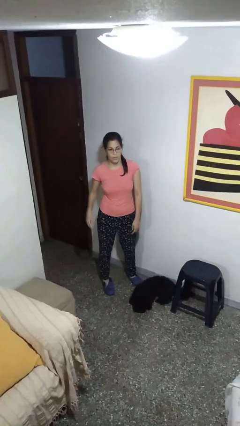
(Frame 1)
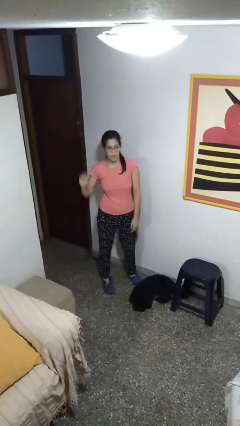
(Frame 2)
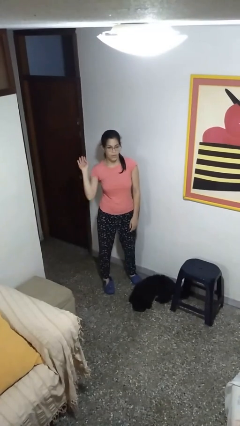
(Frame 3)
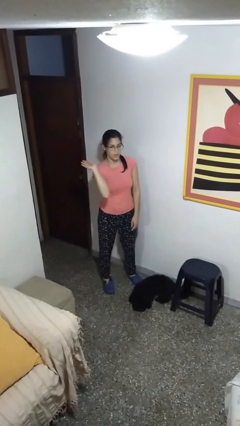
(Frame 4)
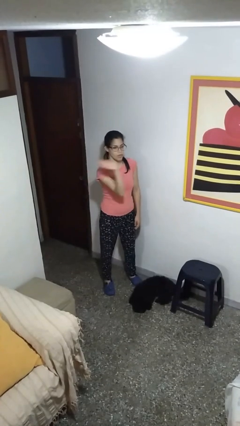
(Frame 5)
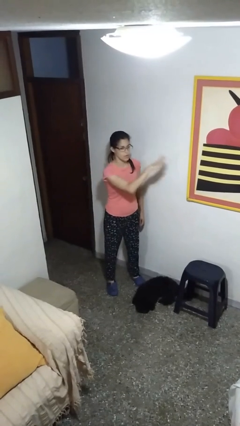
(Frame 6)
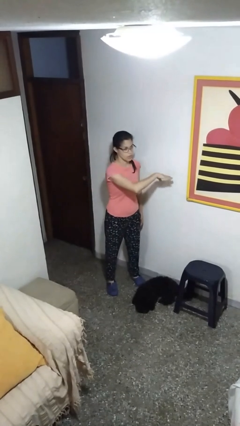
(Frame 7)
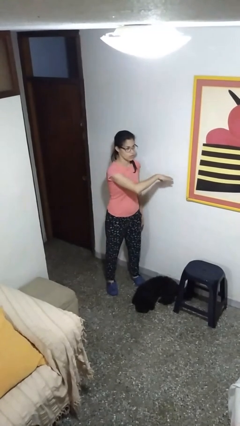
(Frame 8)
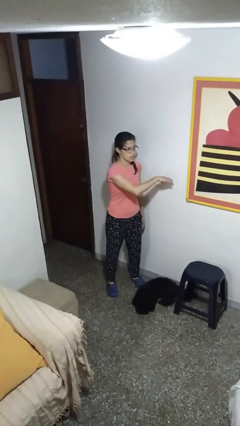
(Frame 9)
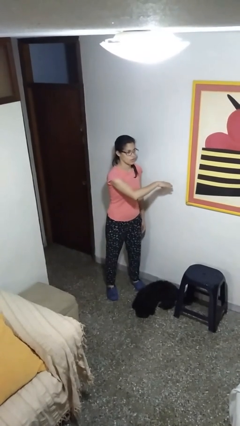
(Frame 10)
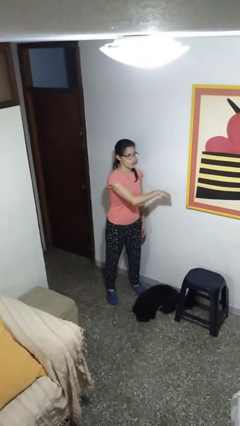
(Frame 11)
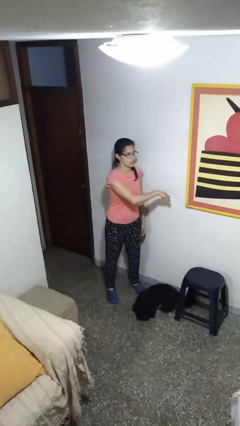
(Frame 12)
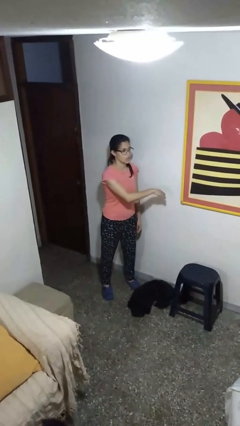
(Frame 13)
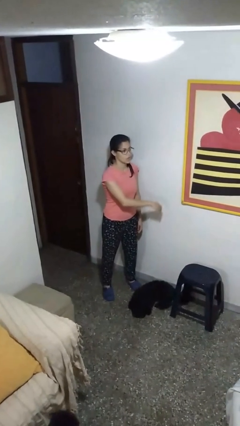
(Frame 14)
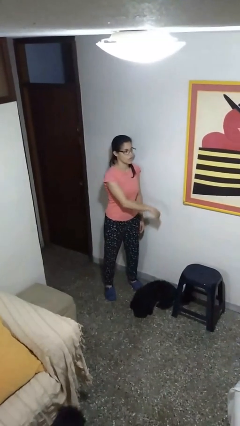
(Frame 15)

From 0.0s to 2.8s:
person gestures swipe left

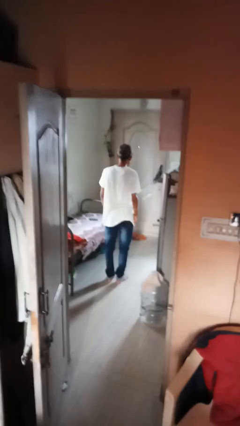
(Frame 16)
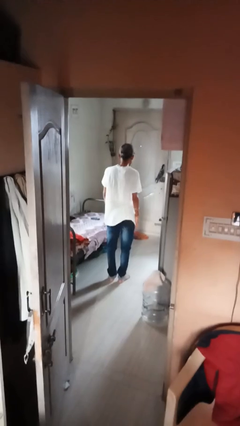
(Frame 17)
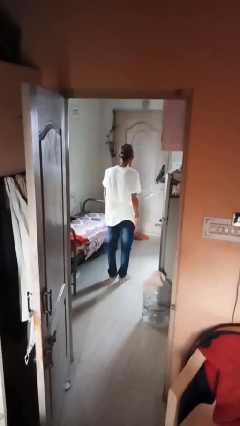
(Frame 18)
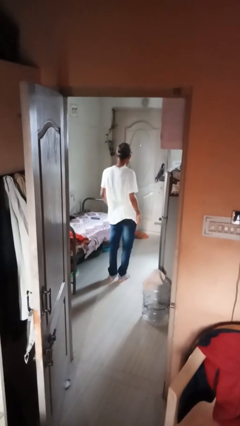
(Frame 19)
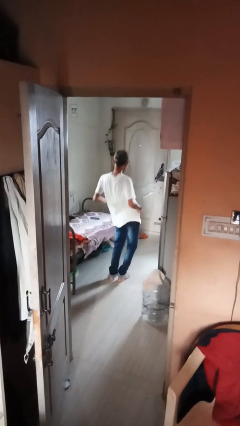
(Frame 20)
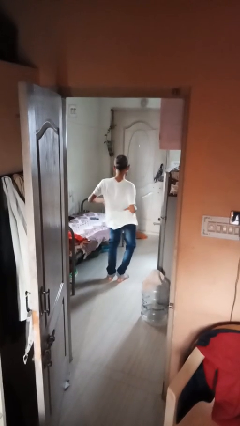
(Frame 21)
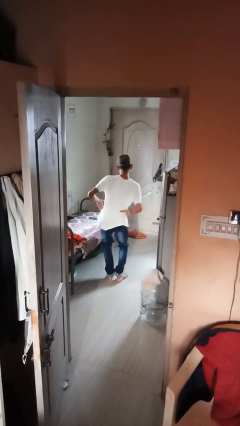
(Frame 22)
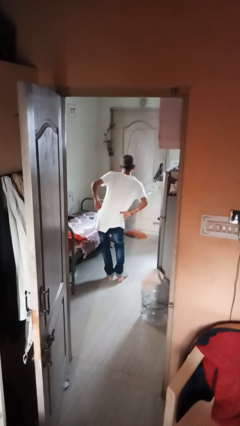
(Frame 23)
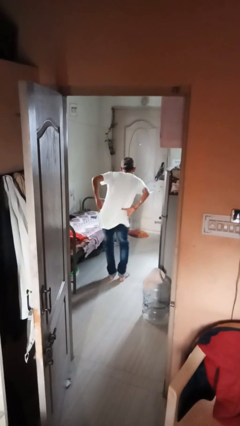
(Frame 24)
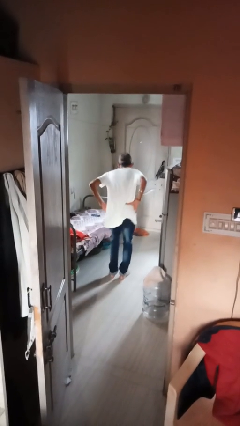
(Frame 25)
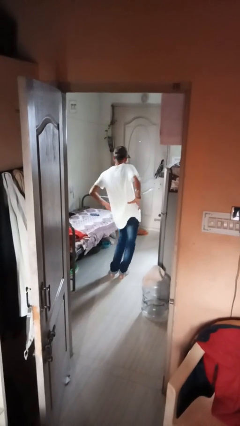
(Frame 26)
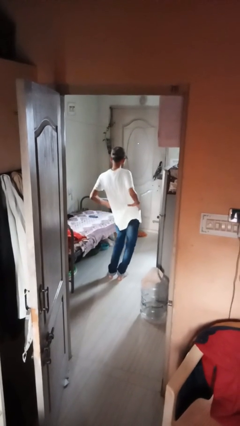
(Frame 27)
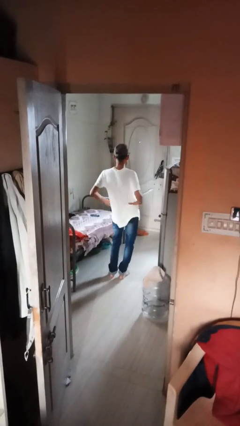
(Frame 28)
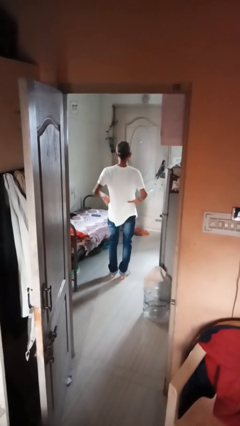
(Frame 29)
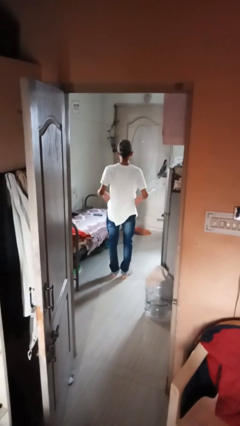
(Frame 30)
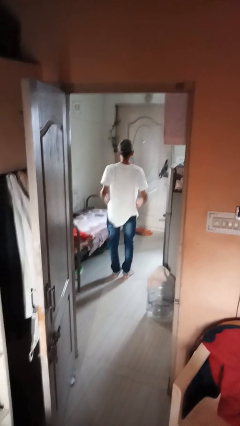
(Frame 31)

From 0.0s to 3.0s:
person wiggles hips

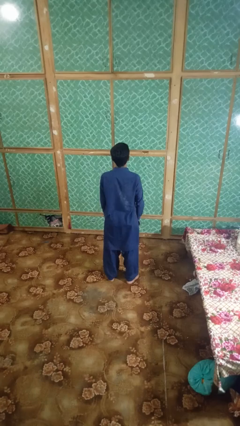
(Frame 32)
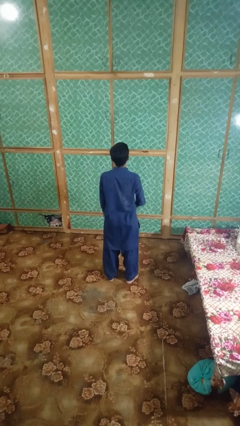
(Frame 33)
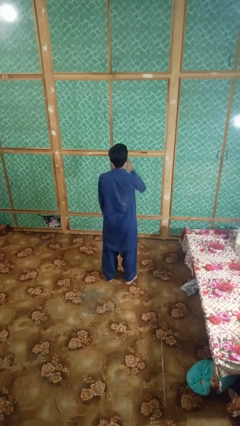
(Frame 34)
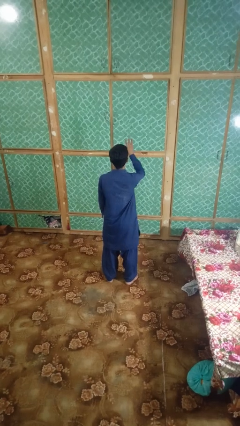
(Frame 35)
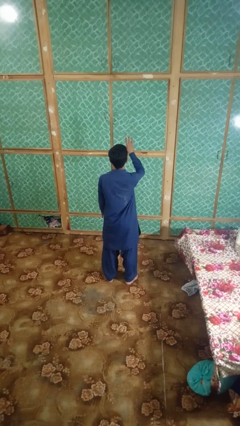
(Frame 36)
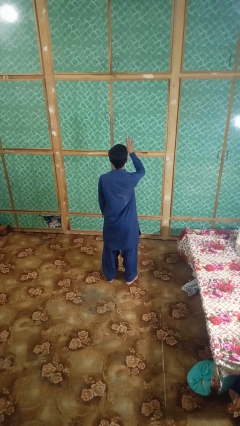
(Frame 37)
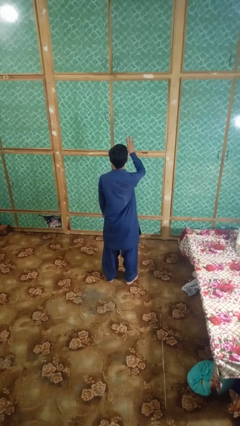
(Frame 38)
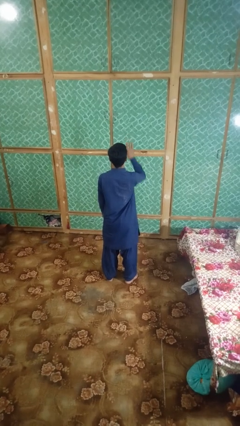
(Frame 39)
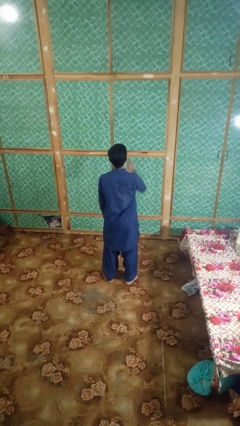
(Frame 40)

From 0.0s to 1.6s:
person gestures number three

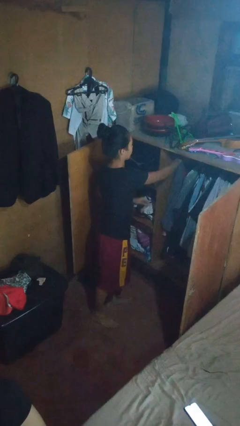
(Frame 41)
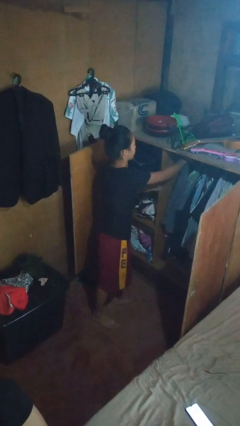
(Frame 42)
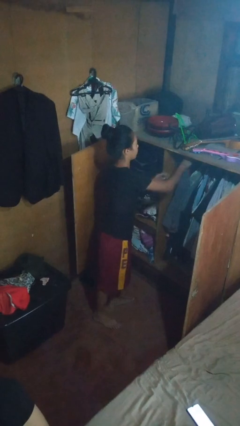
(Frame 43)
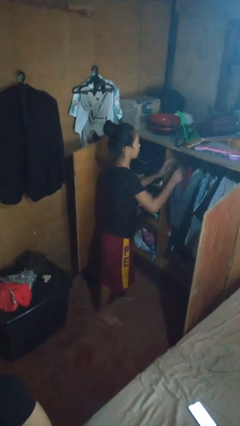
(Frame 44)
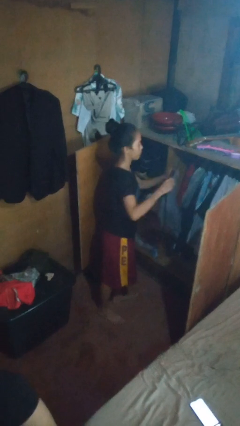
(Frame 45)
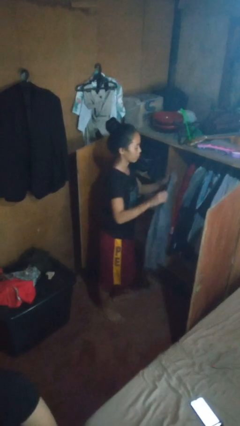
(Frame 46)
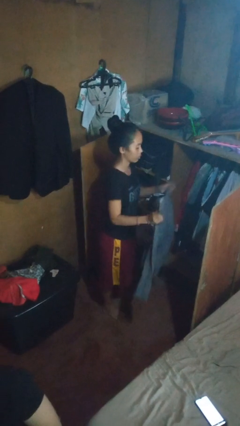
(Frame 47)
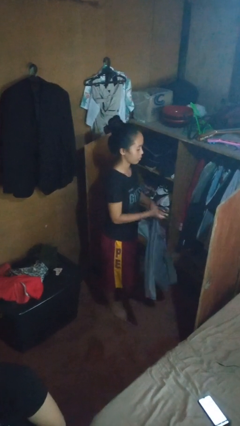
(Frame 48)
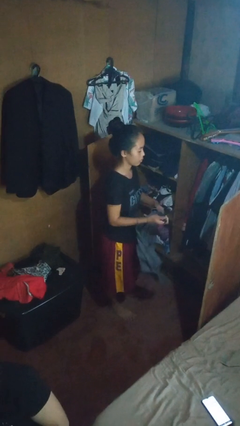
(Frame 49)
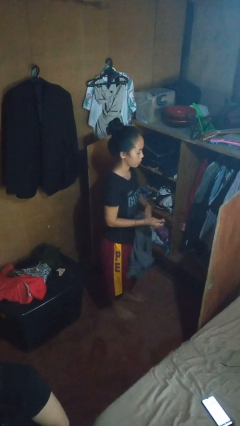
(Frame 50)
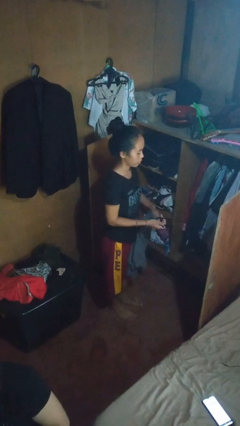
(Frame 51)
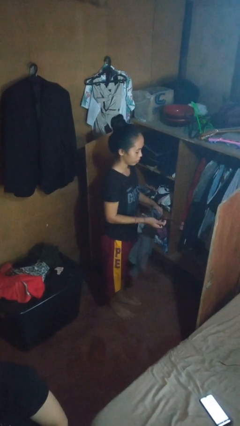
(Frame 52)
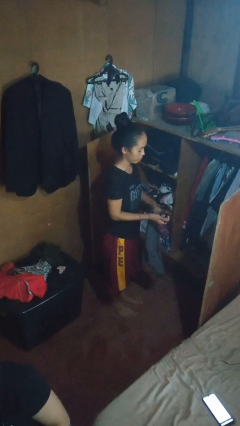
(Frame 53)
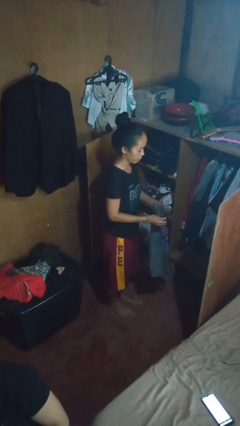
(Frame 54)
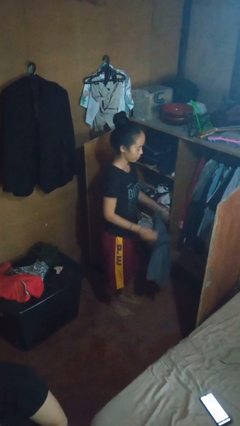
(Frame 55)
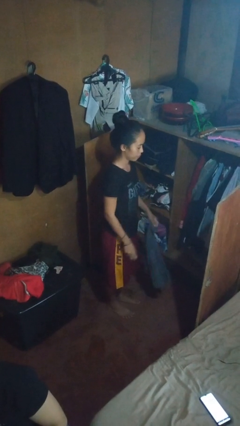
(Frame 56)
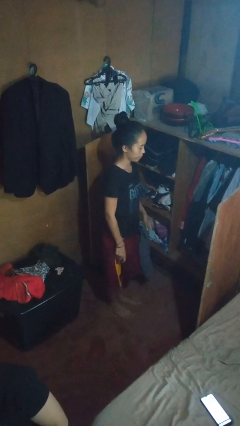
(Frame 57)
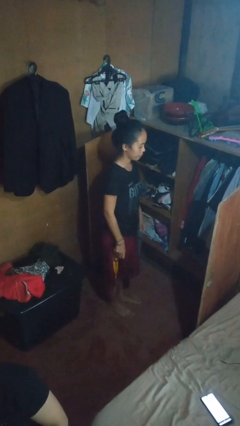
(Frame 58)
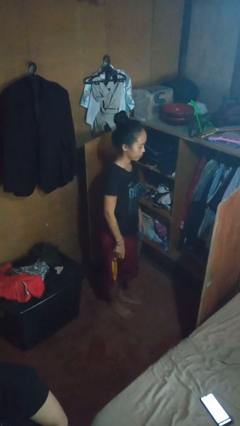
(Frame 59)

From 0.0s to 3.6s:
person takes clothes from closet

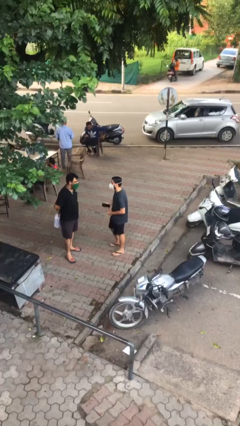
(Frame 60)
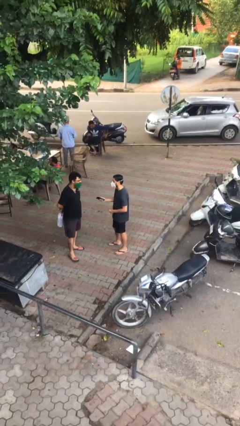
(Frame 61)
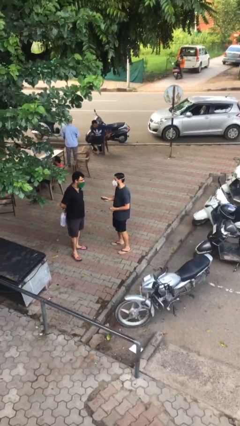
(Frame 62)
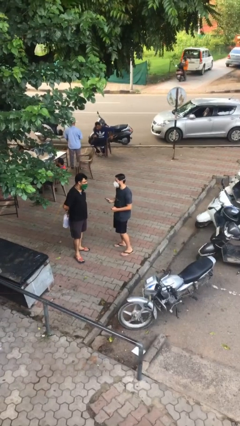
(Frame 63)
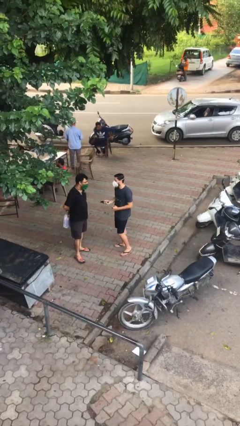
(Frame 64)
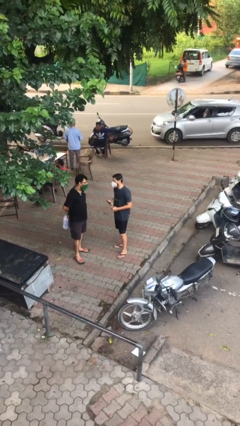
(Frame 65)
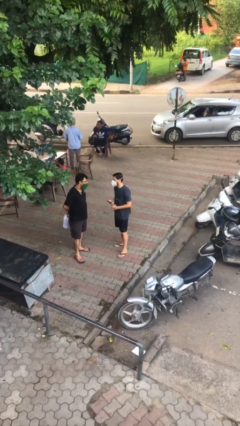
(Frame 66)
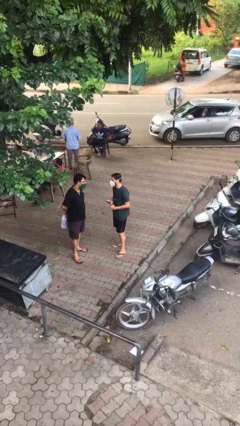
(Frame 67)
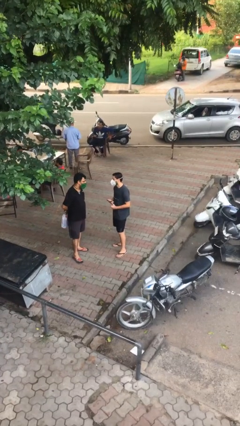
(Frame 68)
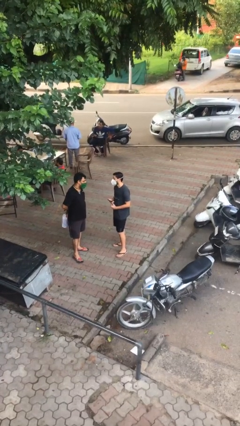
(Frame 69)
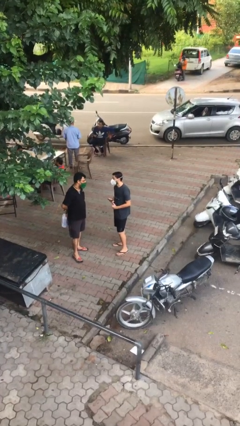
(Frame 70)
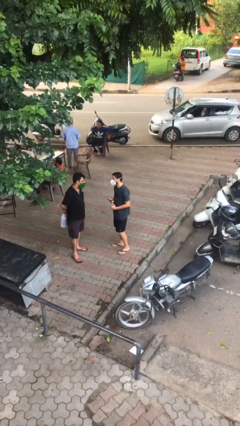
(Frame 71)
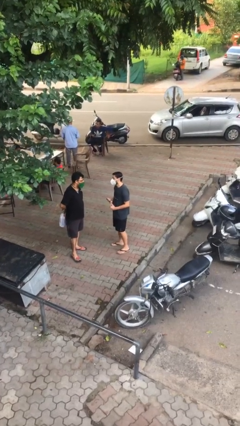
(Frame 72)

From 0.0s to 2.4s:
person talks to person

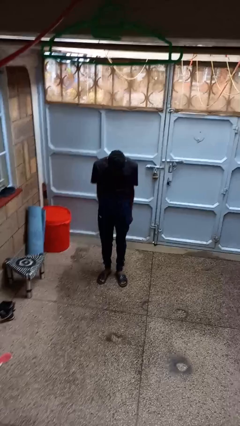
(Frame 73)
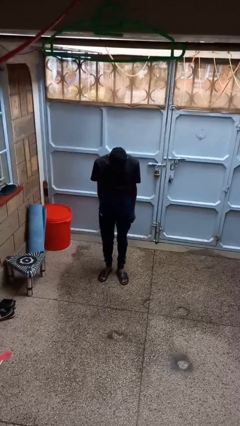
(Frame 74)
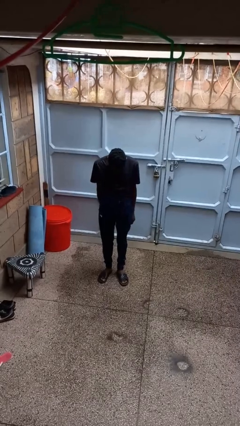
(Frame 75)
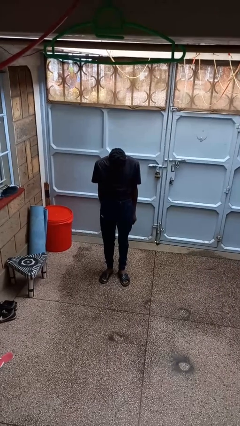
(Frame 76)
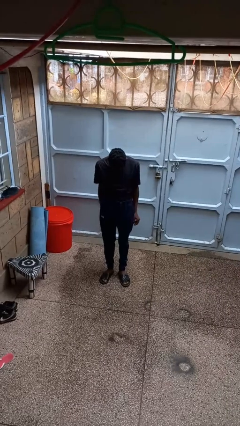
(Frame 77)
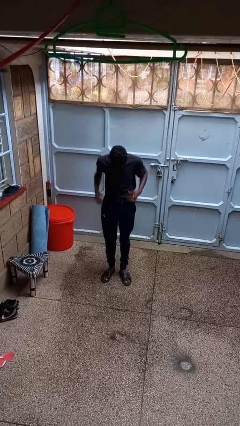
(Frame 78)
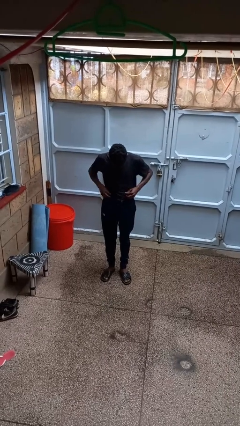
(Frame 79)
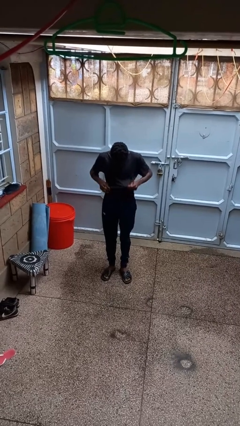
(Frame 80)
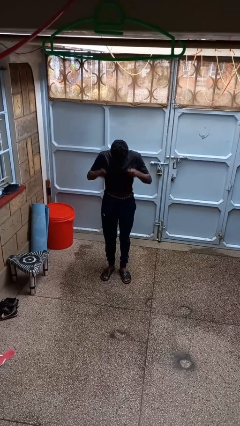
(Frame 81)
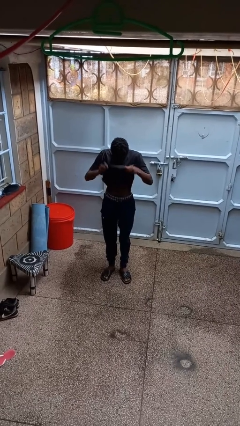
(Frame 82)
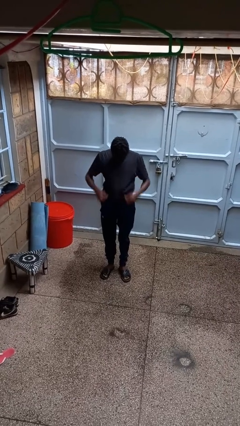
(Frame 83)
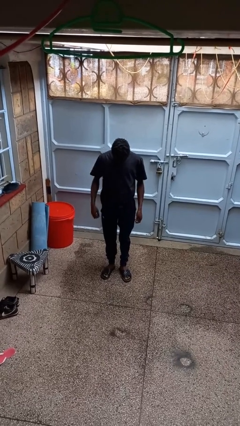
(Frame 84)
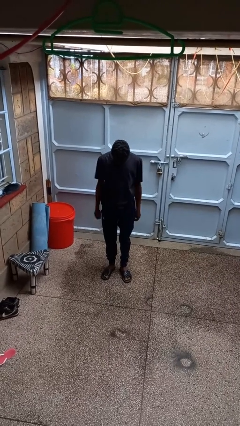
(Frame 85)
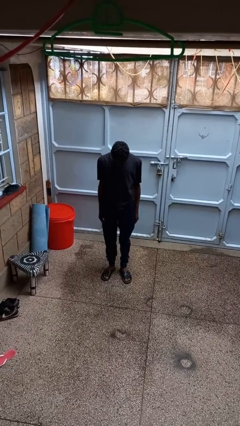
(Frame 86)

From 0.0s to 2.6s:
person untucks shirt

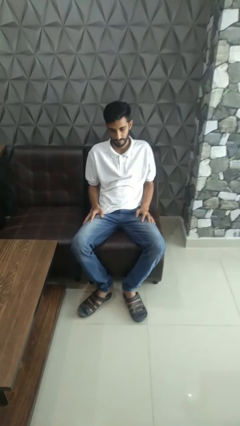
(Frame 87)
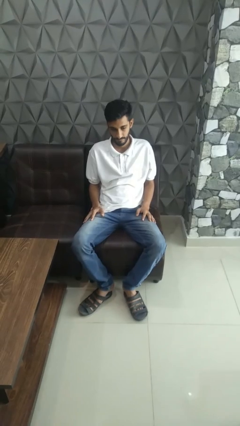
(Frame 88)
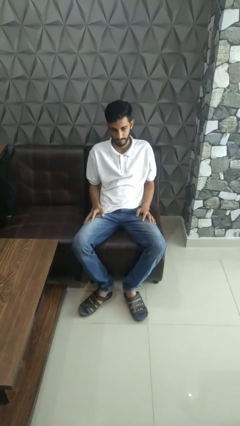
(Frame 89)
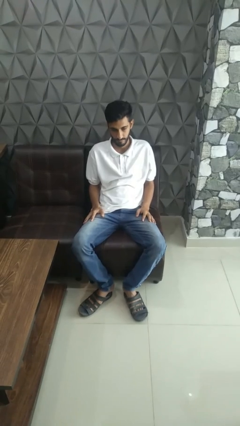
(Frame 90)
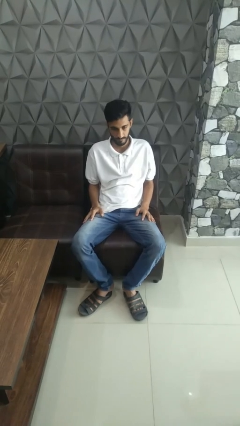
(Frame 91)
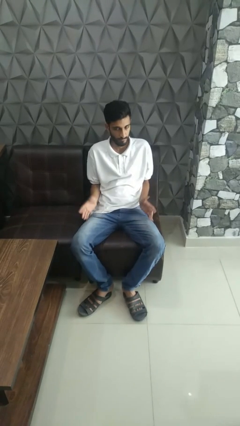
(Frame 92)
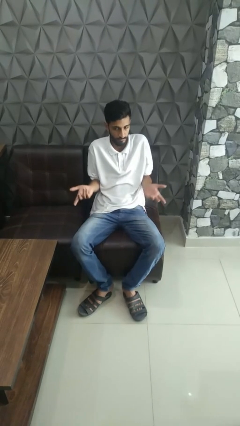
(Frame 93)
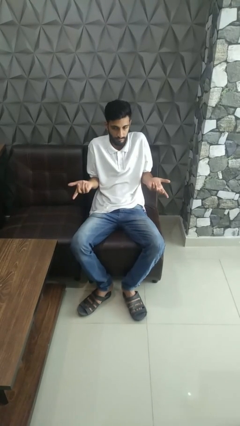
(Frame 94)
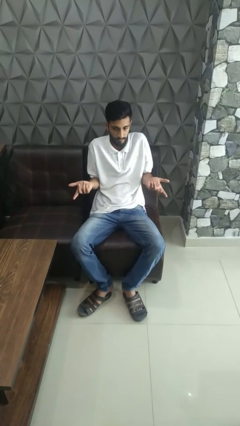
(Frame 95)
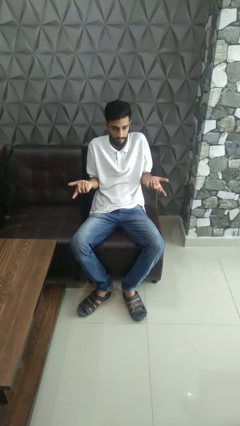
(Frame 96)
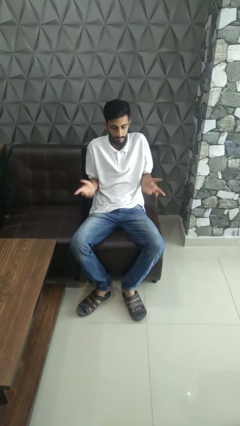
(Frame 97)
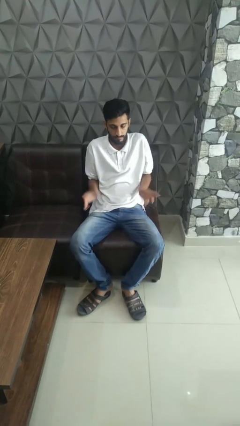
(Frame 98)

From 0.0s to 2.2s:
person shrugs
